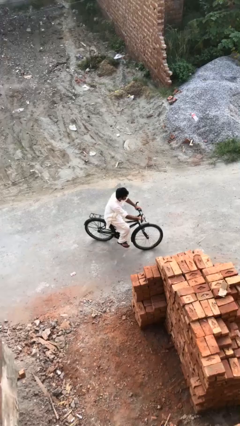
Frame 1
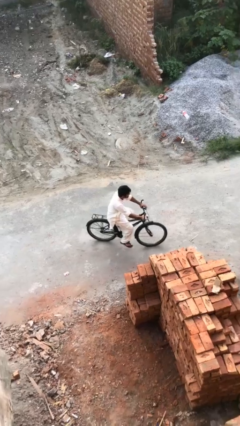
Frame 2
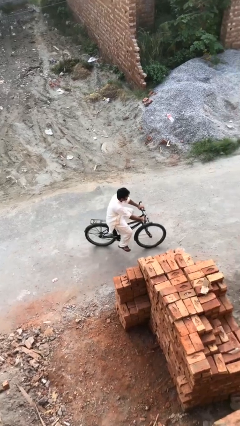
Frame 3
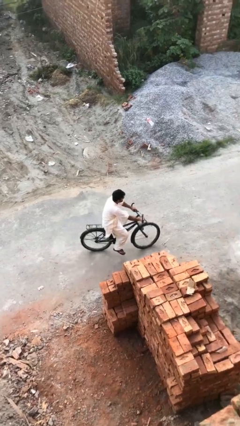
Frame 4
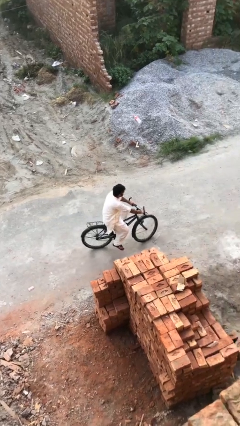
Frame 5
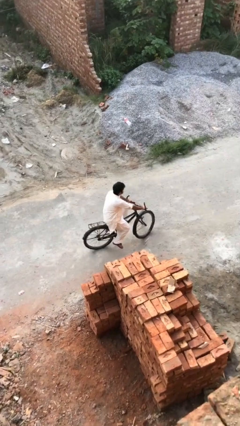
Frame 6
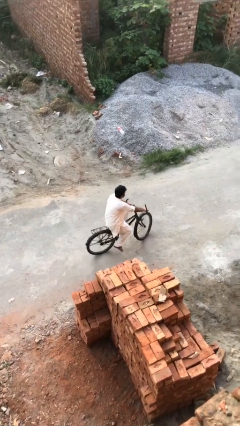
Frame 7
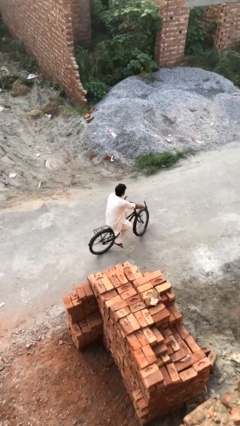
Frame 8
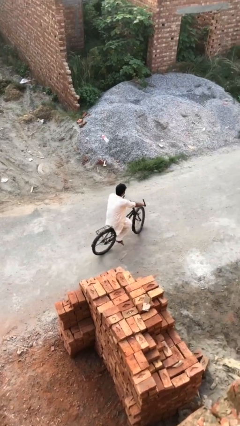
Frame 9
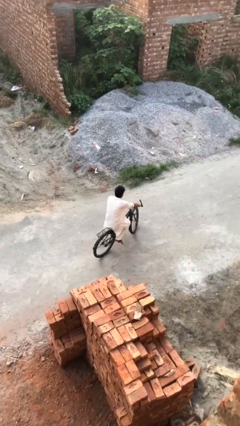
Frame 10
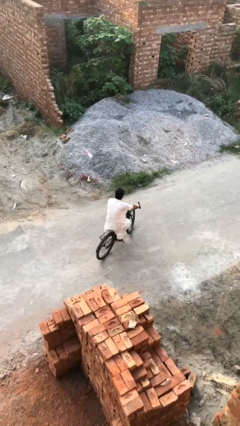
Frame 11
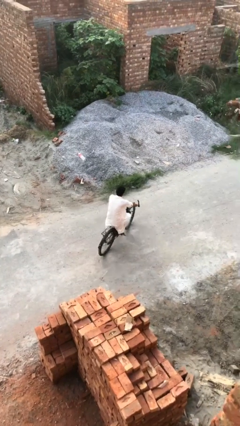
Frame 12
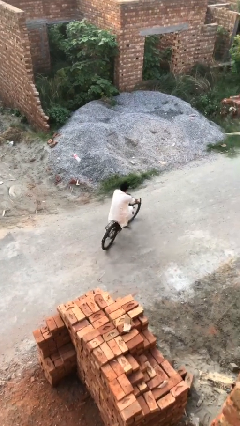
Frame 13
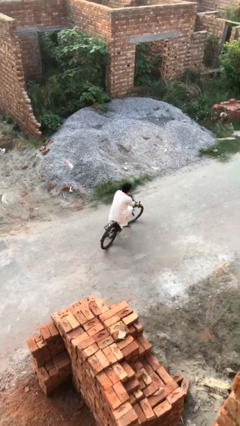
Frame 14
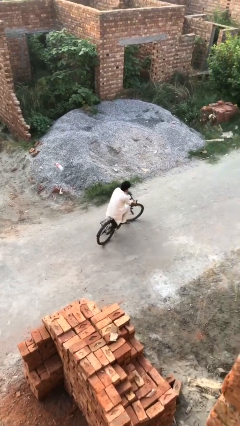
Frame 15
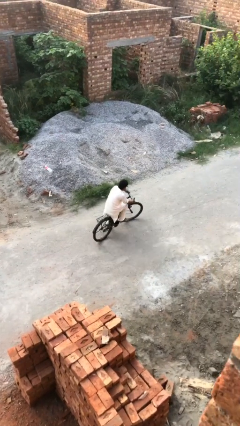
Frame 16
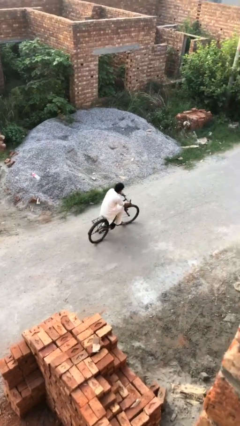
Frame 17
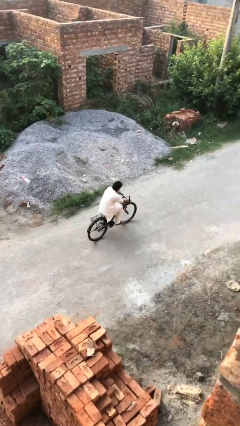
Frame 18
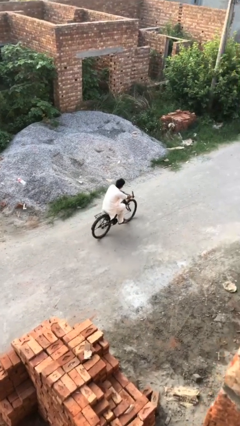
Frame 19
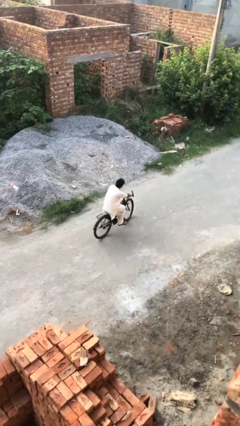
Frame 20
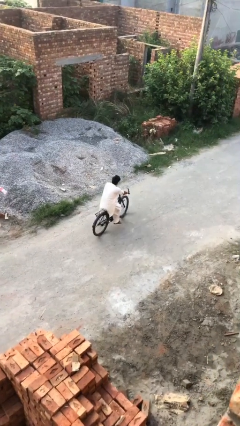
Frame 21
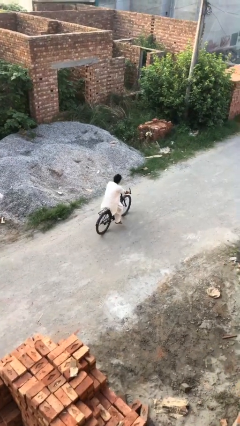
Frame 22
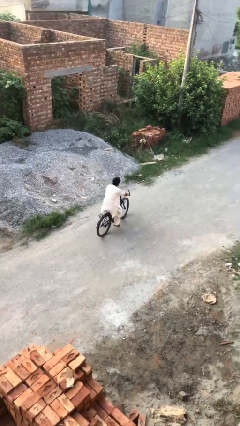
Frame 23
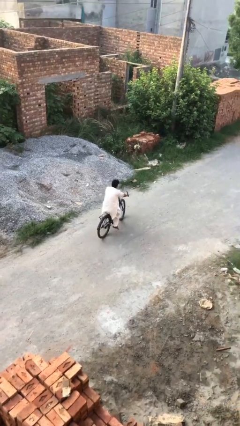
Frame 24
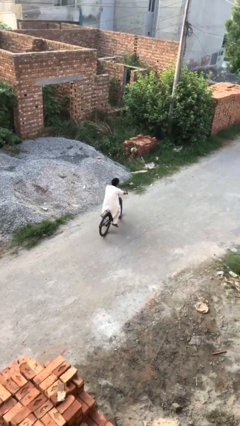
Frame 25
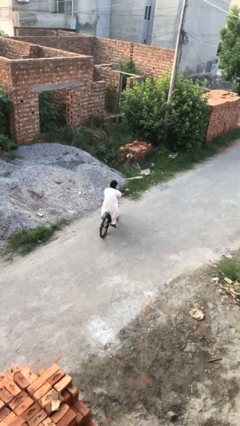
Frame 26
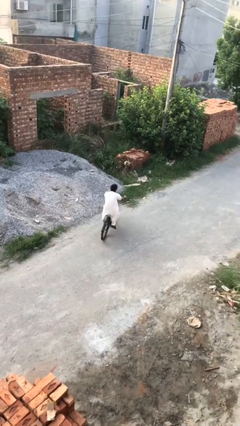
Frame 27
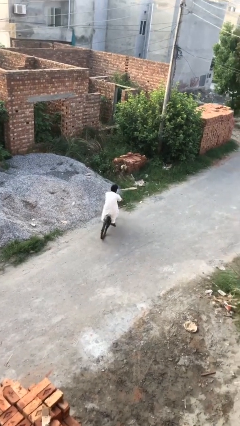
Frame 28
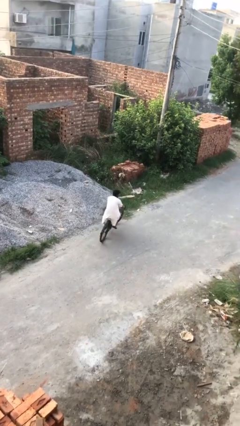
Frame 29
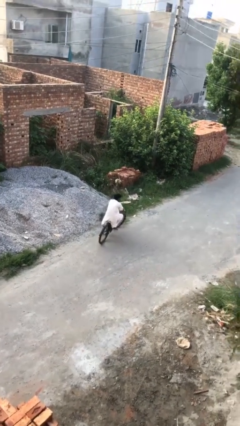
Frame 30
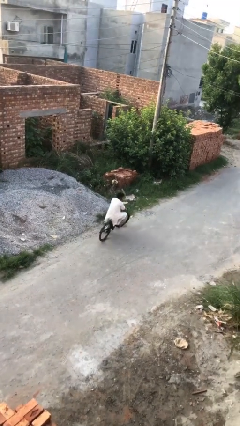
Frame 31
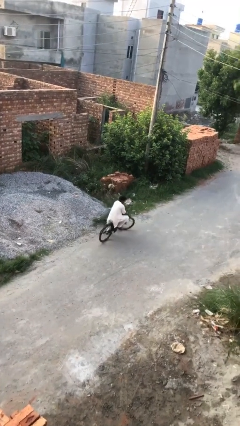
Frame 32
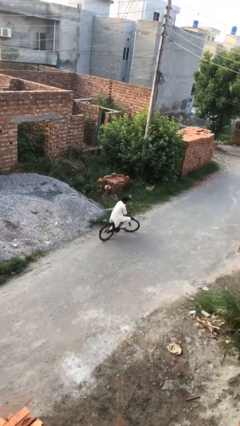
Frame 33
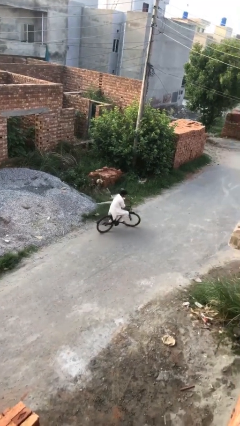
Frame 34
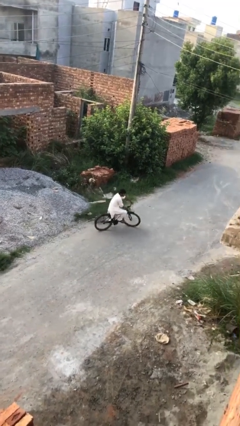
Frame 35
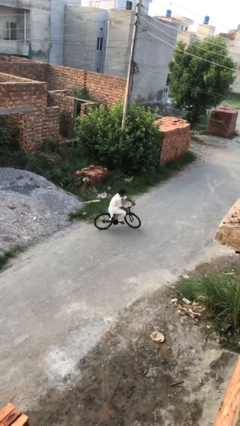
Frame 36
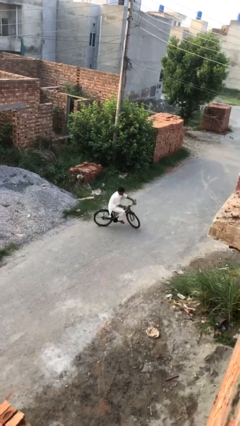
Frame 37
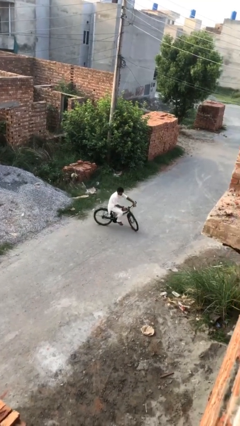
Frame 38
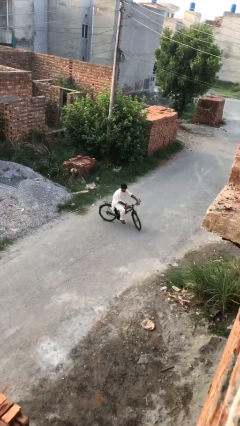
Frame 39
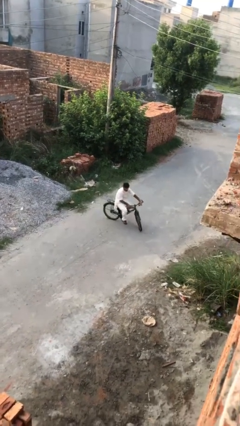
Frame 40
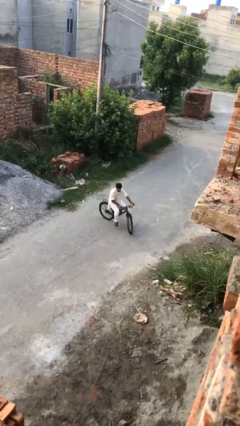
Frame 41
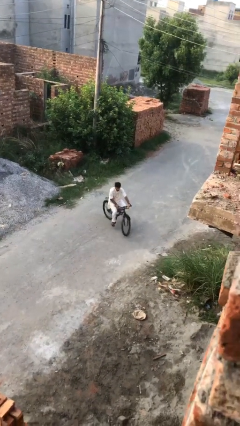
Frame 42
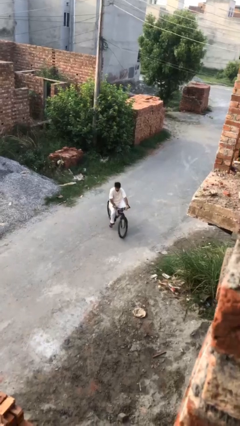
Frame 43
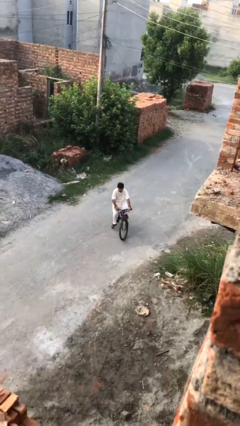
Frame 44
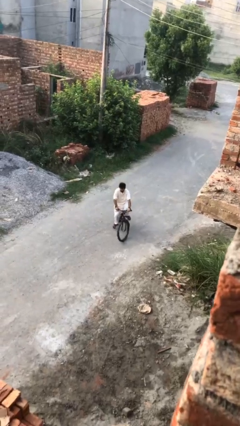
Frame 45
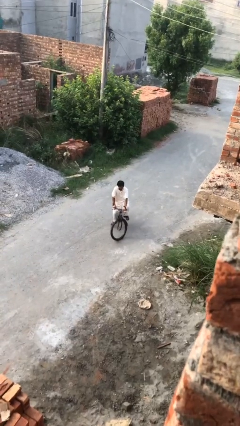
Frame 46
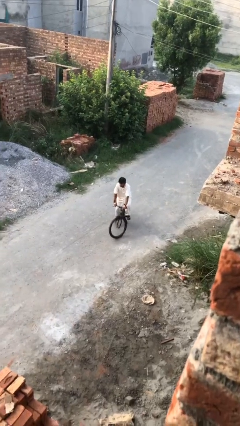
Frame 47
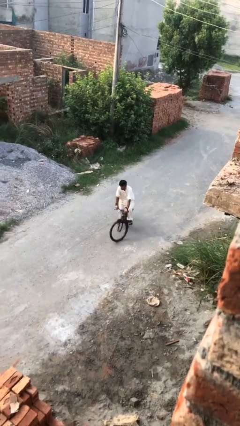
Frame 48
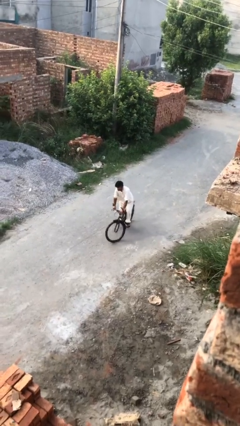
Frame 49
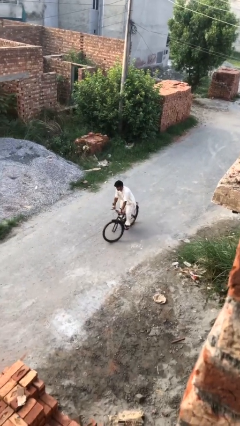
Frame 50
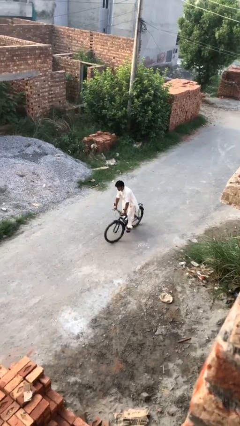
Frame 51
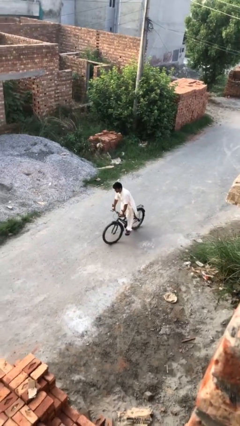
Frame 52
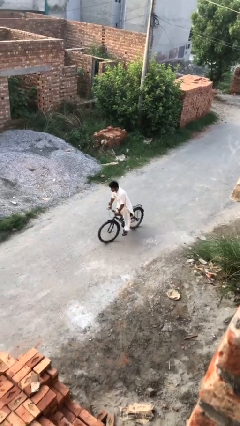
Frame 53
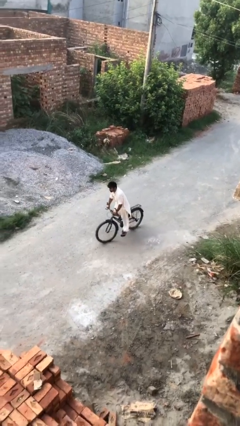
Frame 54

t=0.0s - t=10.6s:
person rides bicycle

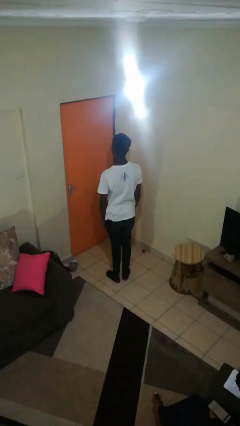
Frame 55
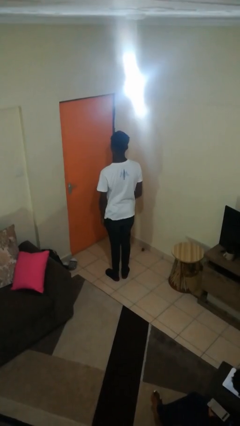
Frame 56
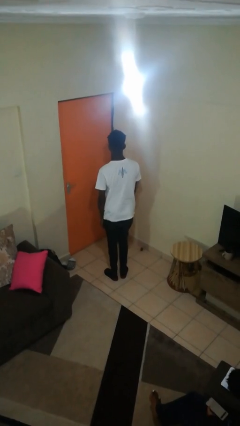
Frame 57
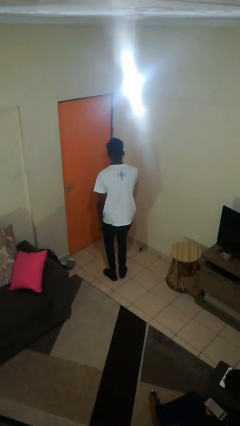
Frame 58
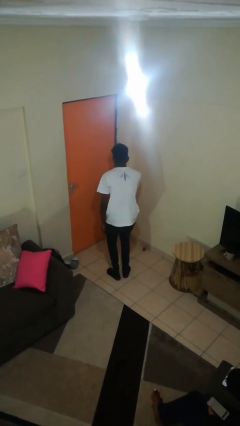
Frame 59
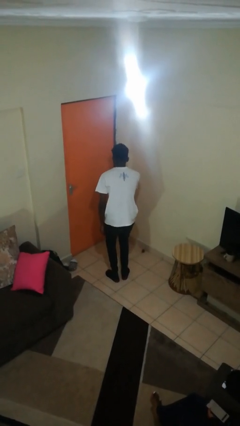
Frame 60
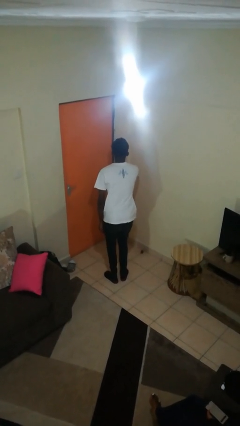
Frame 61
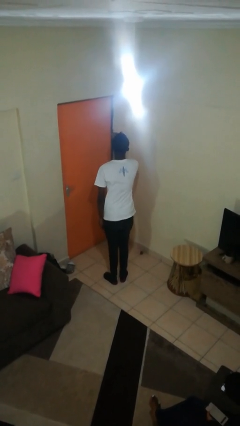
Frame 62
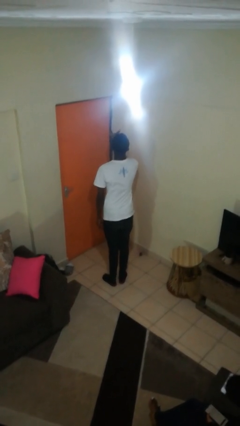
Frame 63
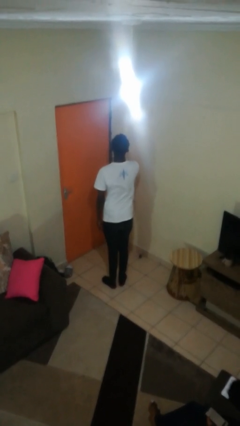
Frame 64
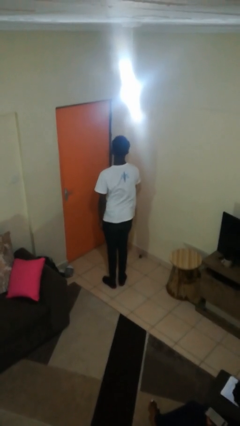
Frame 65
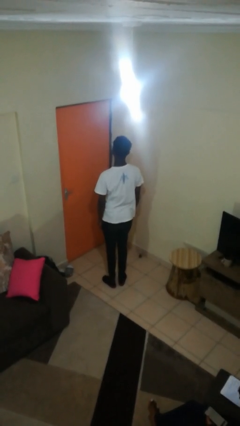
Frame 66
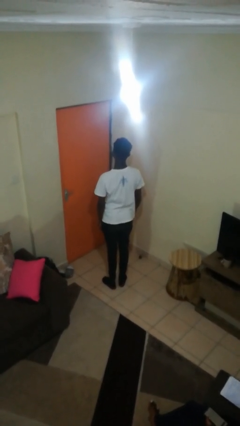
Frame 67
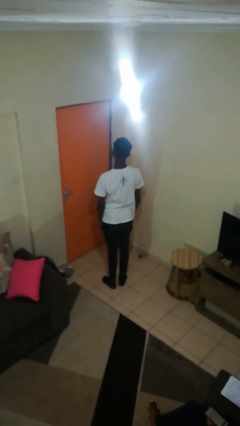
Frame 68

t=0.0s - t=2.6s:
person gestures blow kiss

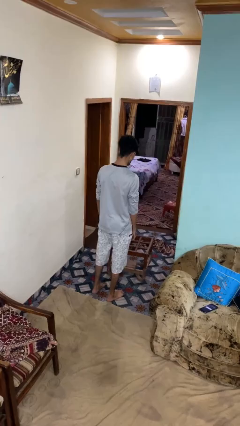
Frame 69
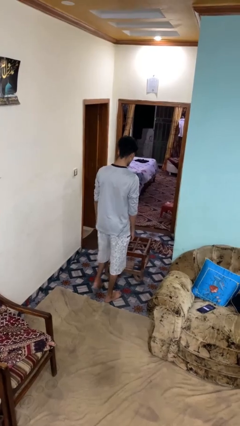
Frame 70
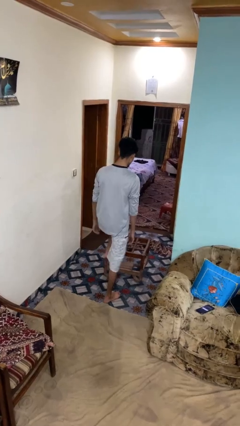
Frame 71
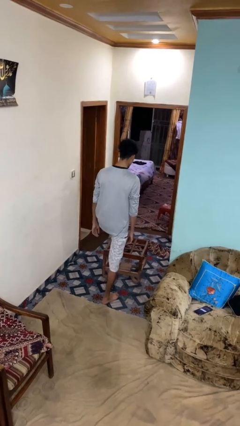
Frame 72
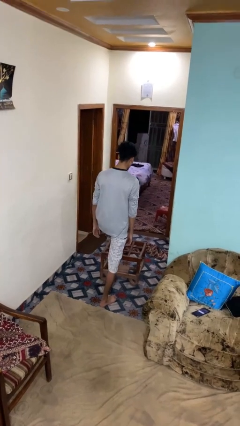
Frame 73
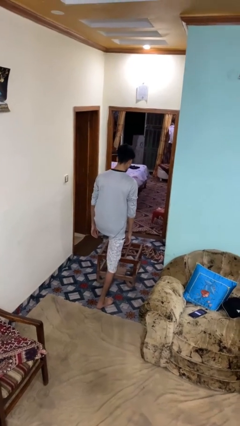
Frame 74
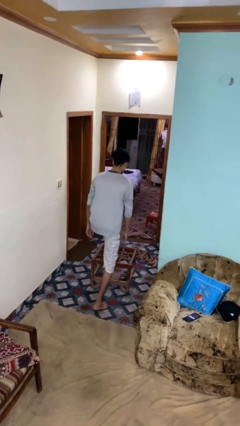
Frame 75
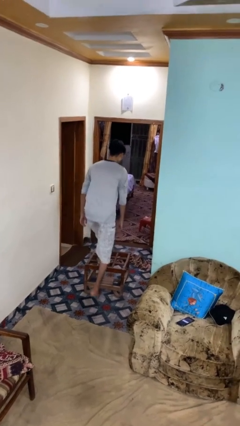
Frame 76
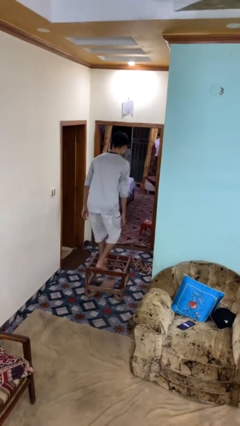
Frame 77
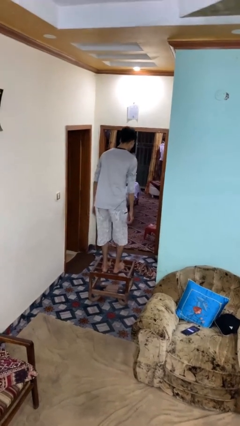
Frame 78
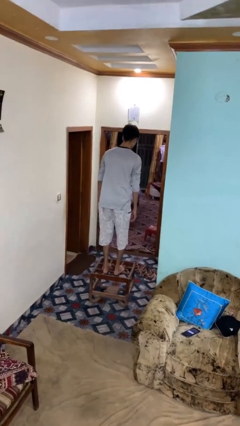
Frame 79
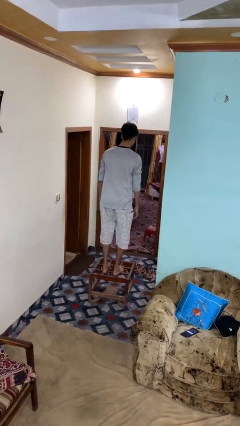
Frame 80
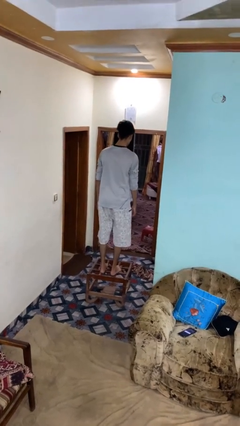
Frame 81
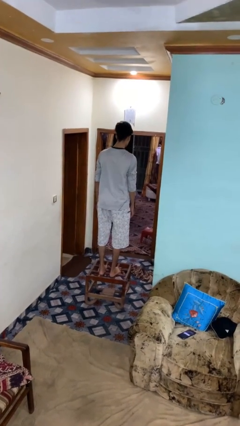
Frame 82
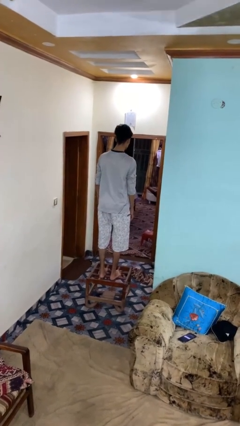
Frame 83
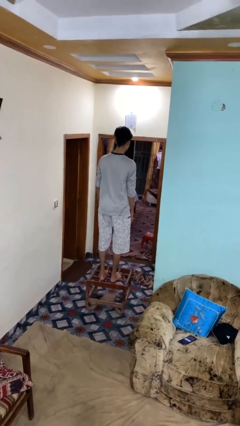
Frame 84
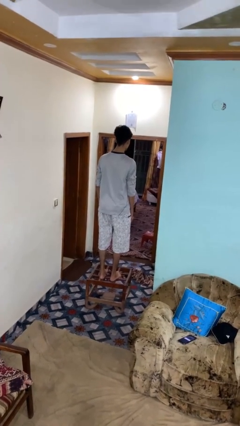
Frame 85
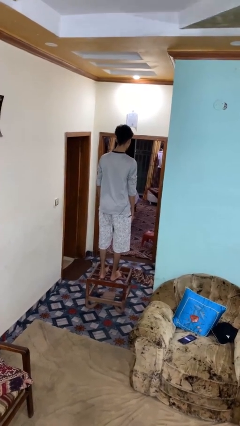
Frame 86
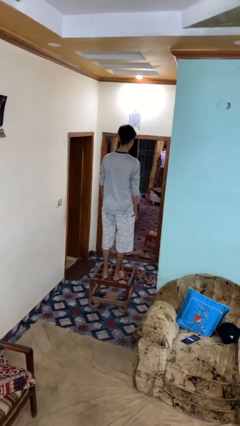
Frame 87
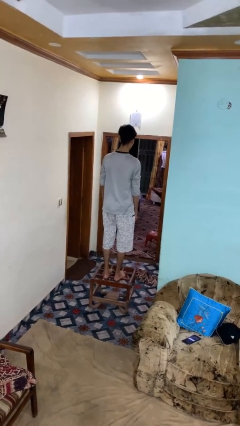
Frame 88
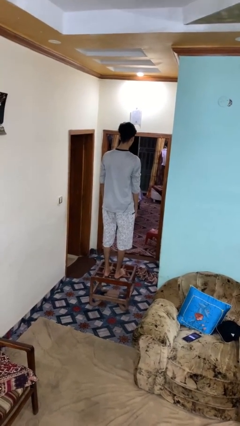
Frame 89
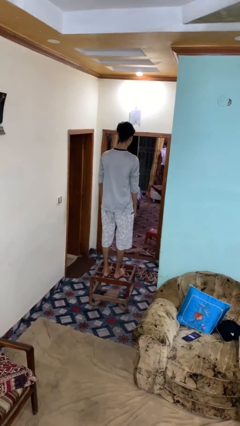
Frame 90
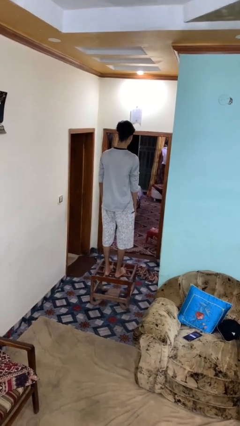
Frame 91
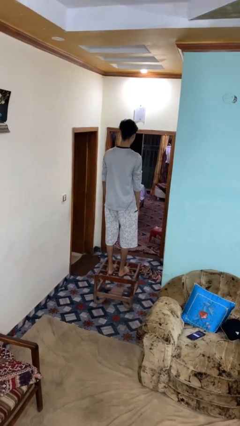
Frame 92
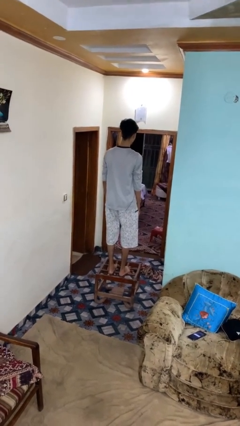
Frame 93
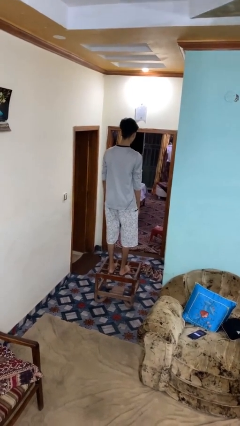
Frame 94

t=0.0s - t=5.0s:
person climbs on table
